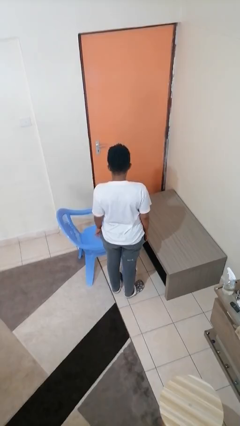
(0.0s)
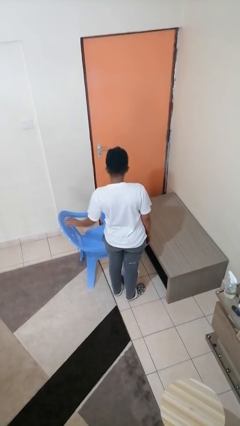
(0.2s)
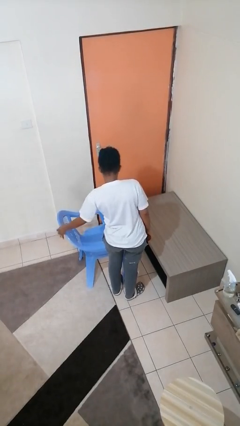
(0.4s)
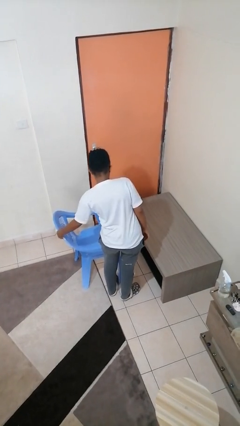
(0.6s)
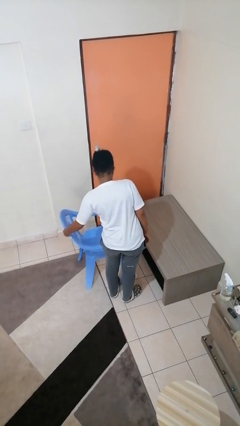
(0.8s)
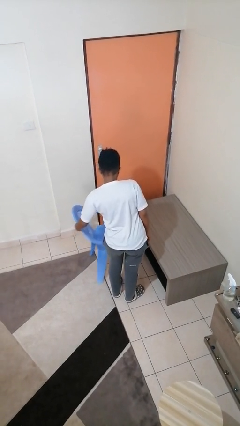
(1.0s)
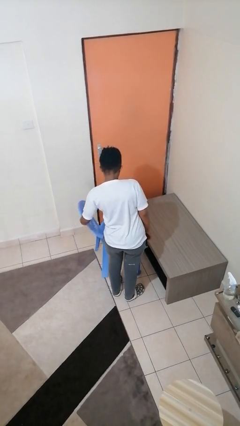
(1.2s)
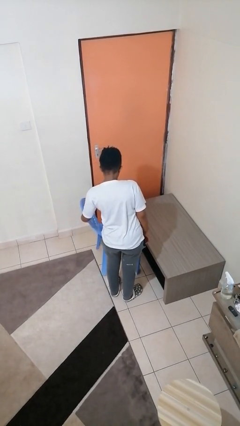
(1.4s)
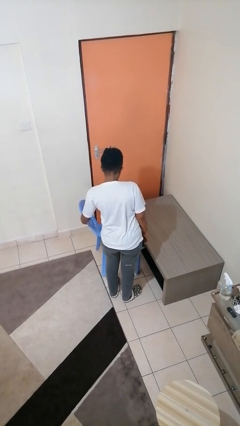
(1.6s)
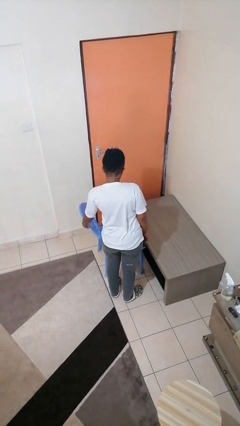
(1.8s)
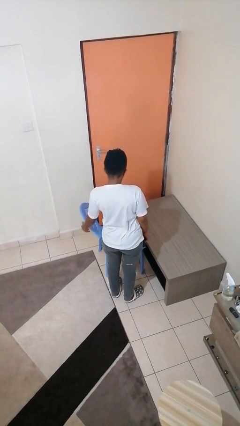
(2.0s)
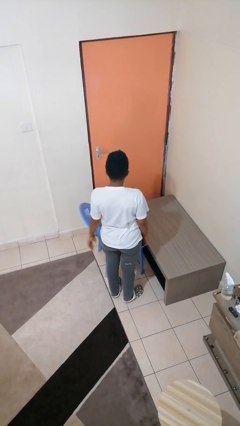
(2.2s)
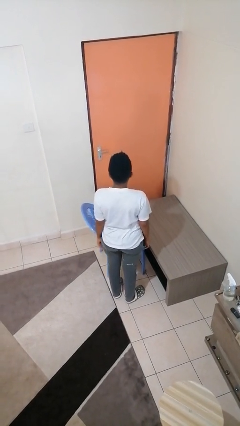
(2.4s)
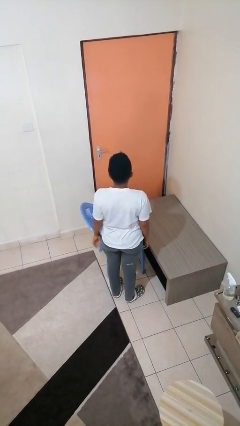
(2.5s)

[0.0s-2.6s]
person pushes in chair

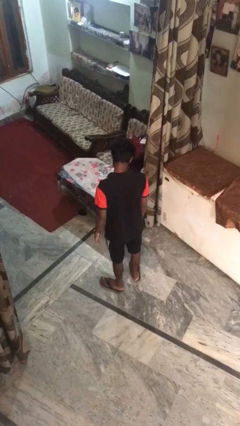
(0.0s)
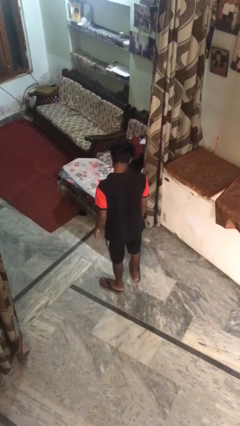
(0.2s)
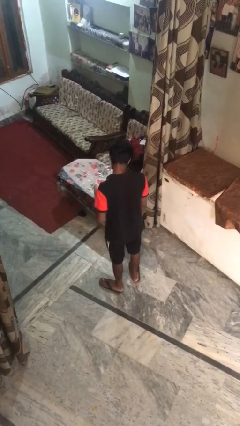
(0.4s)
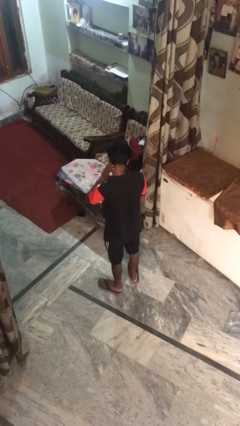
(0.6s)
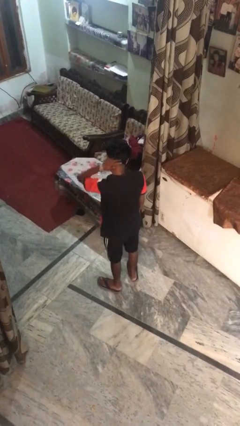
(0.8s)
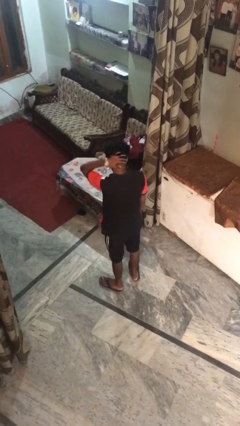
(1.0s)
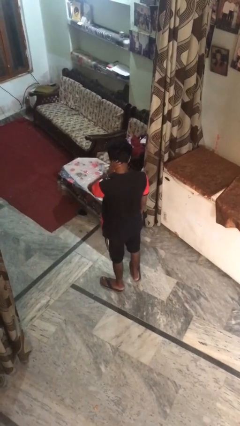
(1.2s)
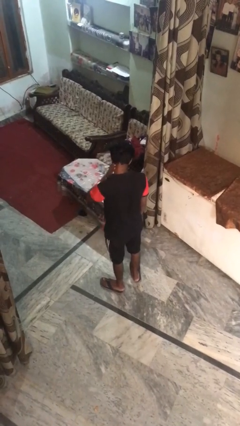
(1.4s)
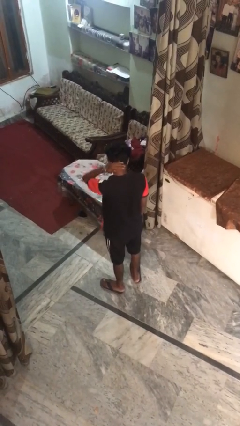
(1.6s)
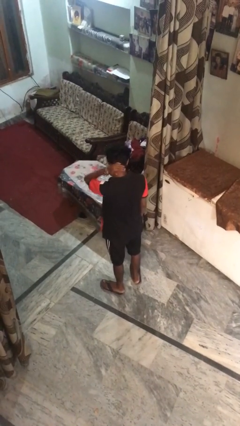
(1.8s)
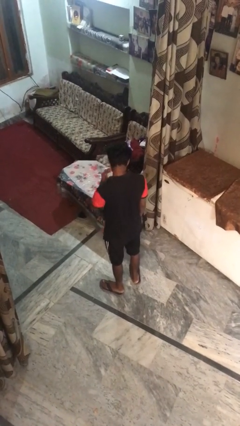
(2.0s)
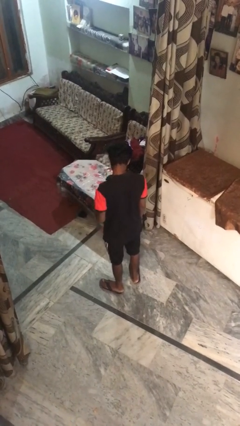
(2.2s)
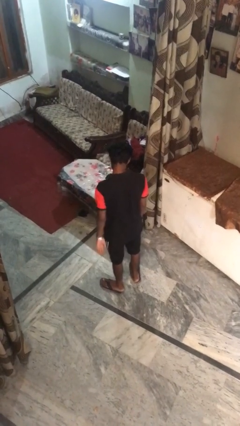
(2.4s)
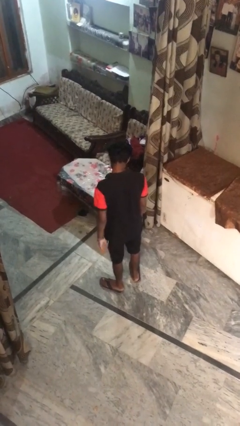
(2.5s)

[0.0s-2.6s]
person rubs neck

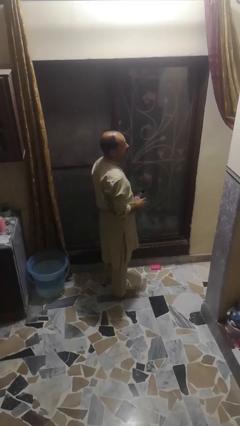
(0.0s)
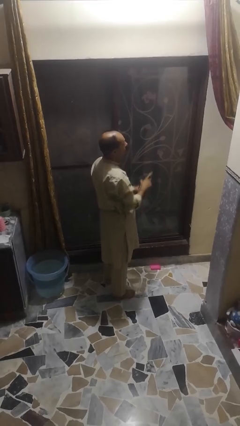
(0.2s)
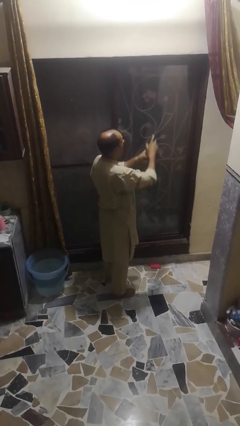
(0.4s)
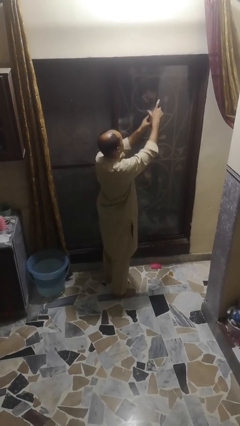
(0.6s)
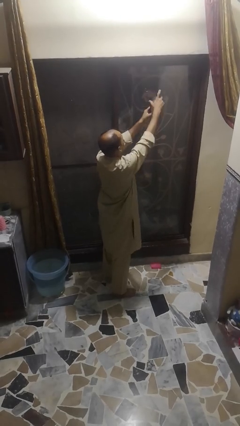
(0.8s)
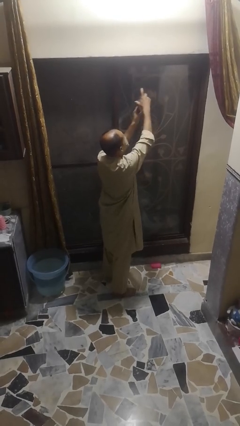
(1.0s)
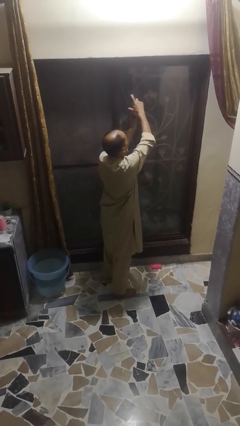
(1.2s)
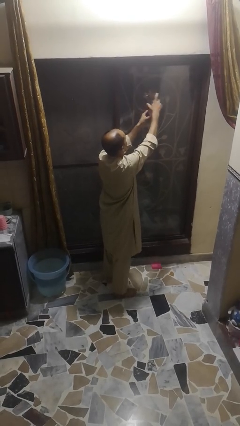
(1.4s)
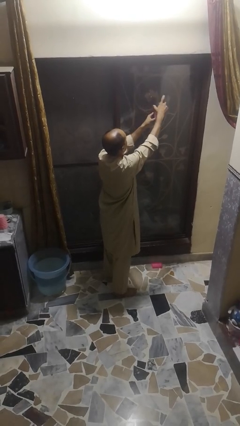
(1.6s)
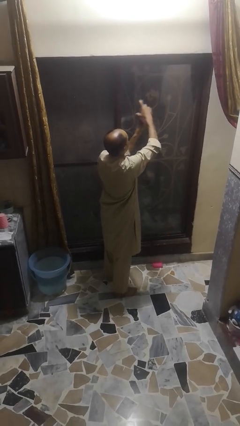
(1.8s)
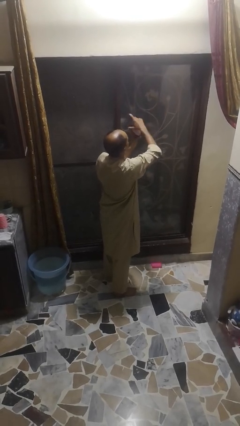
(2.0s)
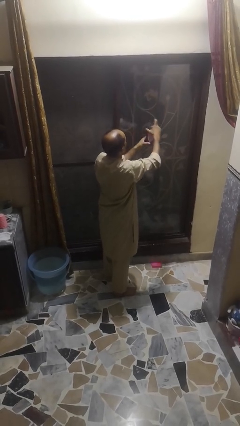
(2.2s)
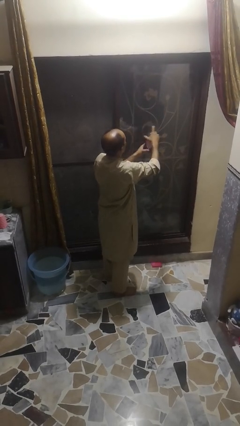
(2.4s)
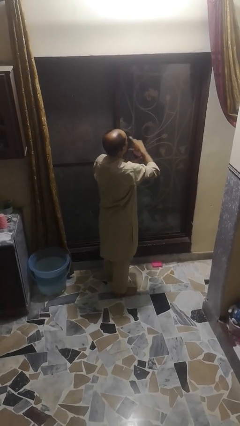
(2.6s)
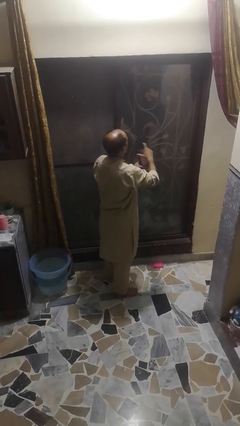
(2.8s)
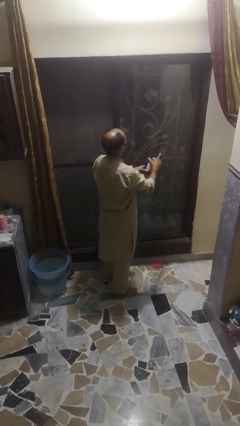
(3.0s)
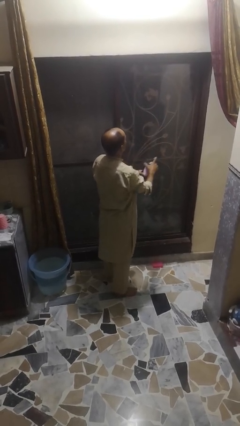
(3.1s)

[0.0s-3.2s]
person sprays from bottle

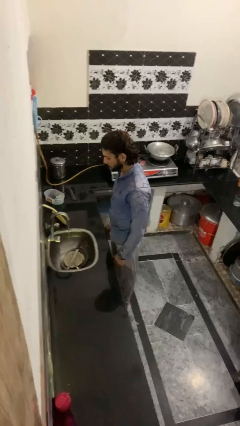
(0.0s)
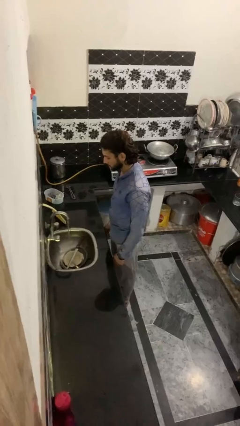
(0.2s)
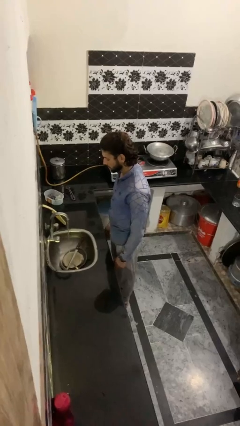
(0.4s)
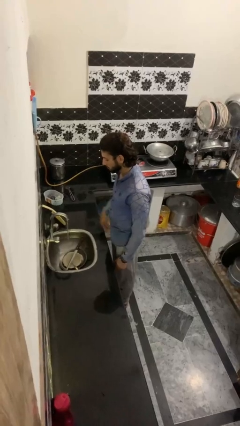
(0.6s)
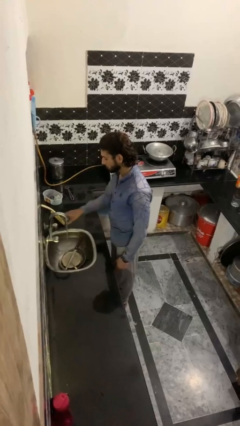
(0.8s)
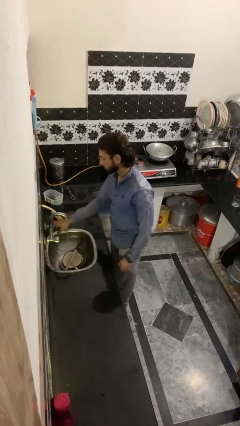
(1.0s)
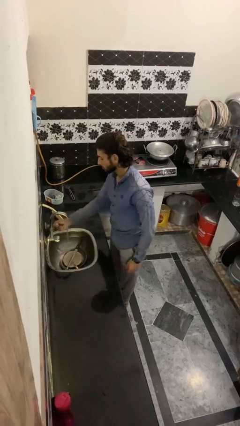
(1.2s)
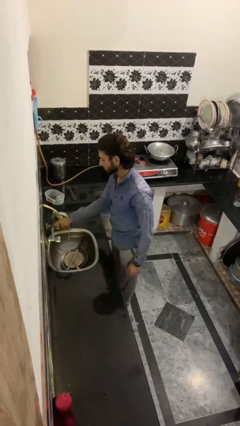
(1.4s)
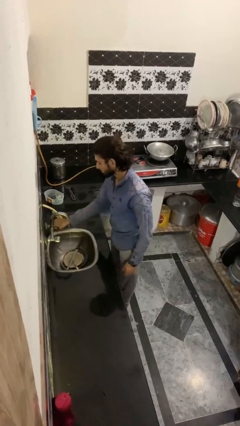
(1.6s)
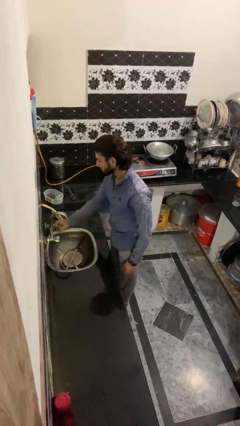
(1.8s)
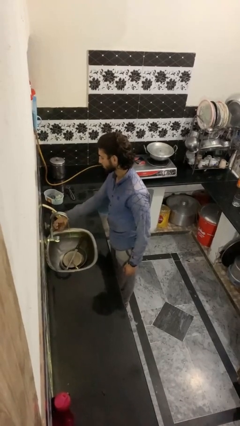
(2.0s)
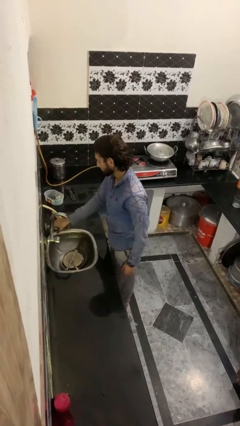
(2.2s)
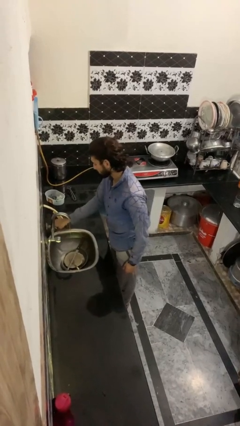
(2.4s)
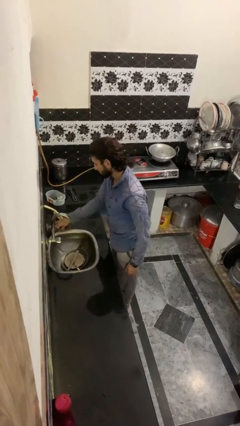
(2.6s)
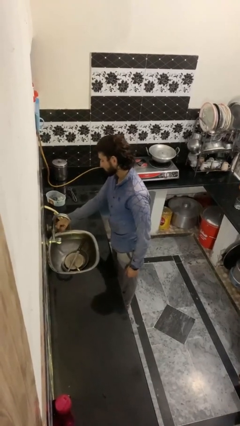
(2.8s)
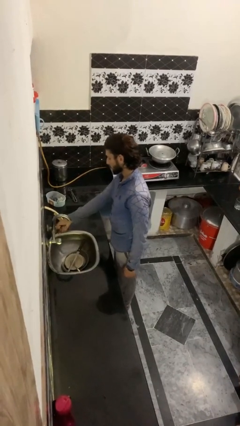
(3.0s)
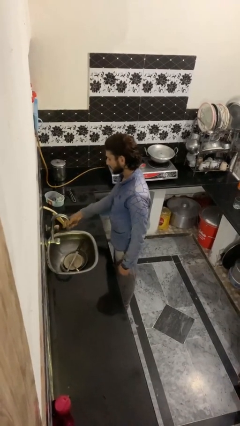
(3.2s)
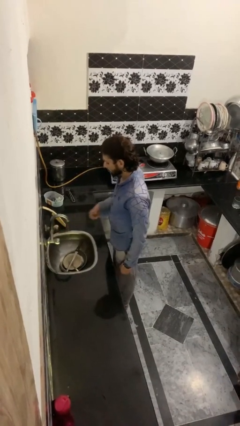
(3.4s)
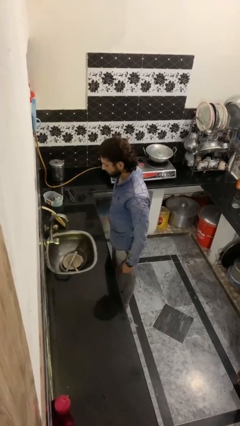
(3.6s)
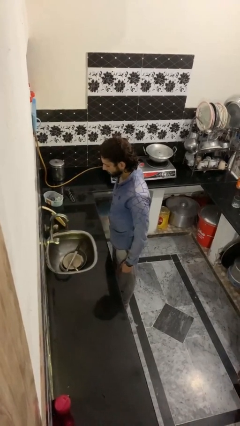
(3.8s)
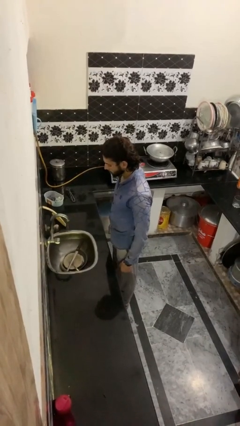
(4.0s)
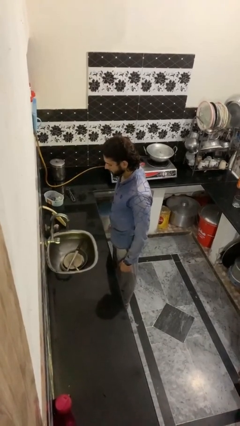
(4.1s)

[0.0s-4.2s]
person turns off faucet

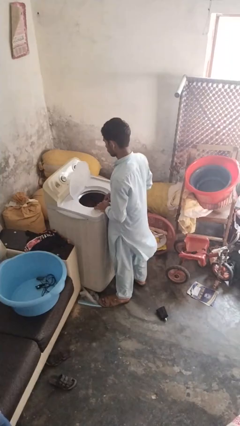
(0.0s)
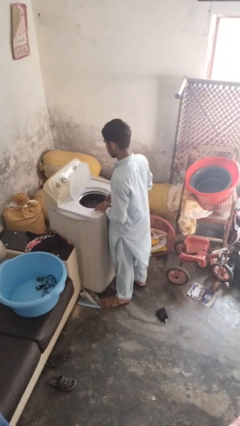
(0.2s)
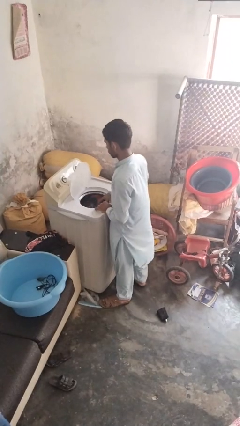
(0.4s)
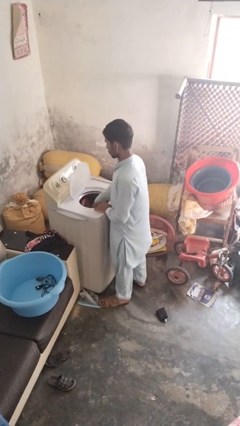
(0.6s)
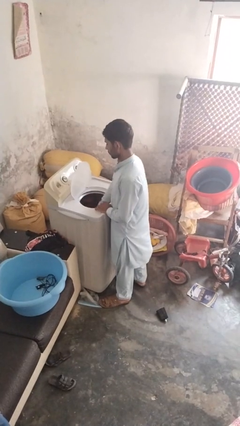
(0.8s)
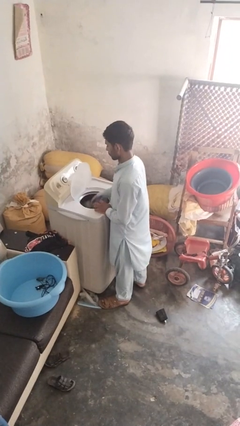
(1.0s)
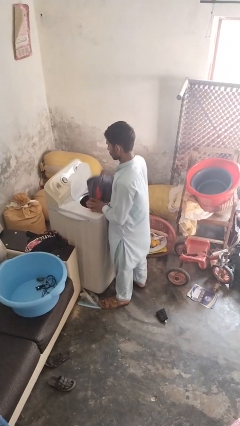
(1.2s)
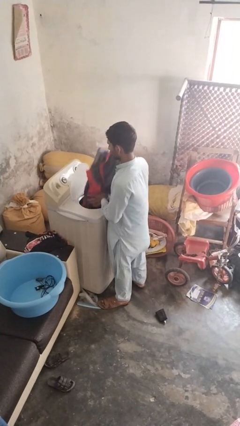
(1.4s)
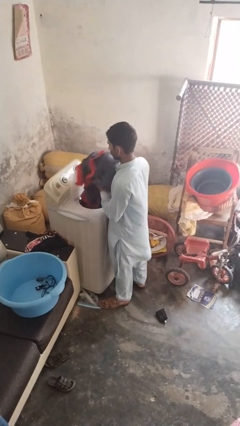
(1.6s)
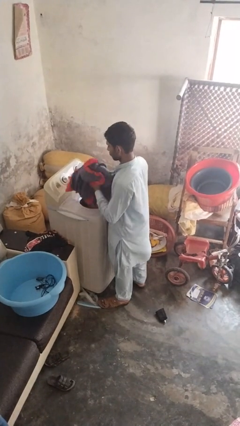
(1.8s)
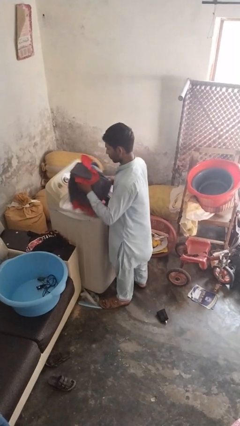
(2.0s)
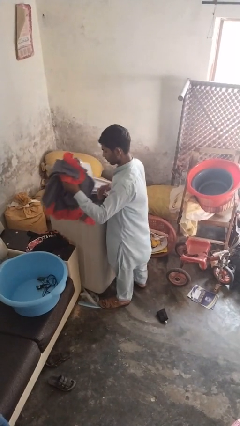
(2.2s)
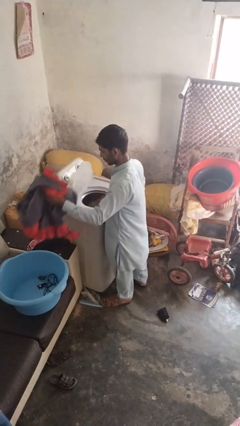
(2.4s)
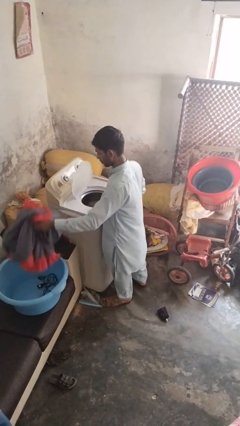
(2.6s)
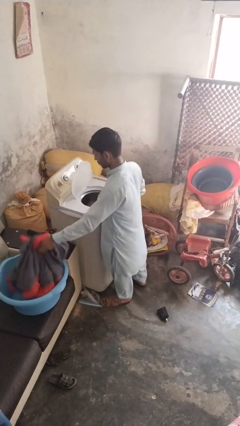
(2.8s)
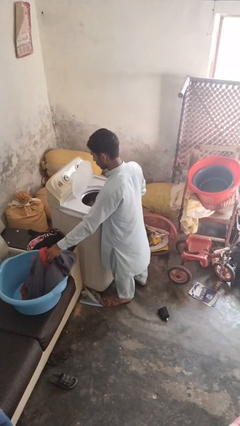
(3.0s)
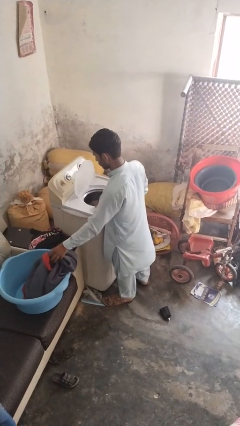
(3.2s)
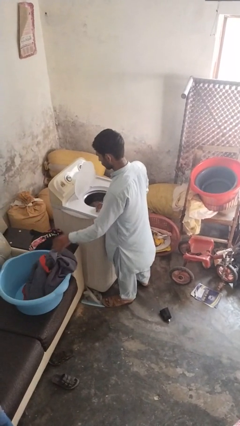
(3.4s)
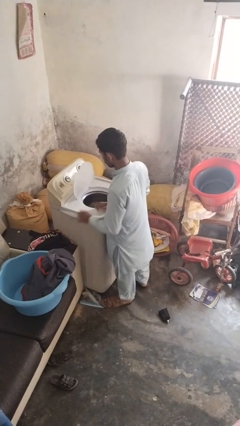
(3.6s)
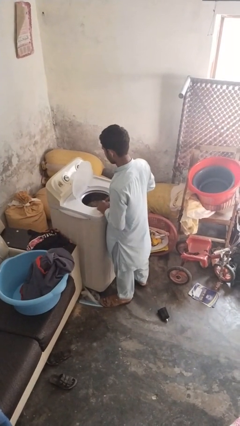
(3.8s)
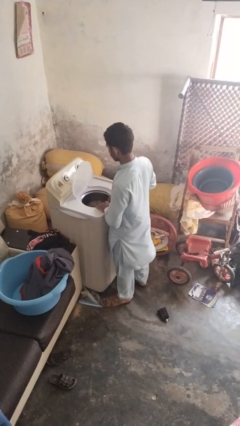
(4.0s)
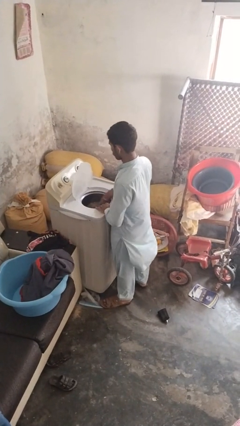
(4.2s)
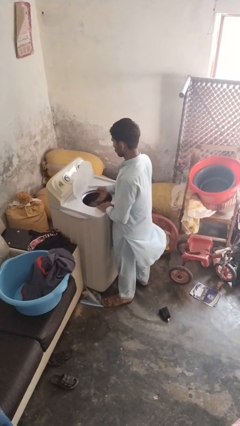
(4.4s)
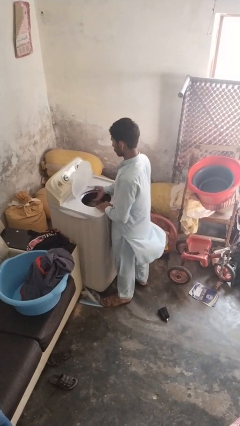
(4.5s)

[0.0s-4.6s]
person loads clotheswasher

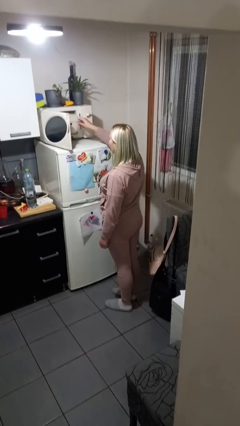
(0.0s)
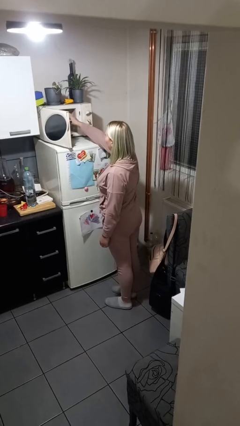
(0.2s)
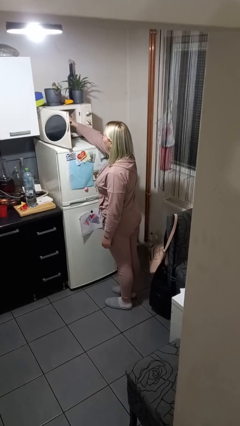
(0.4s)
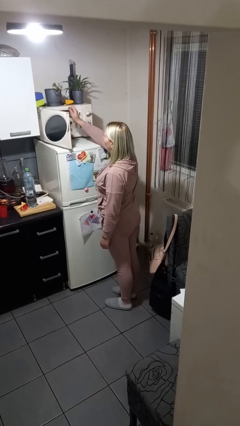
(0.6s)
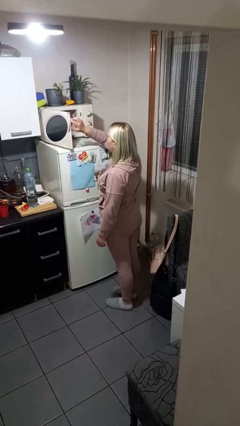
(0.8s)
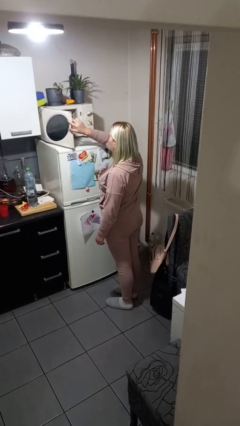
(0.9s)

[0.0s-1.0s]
person puts object into microwave
